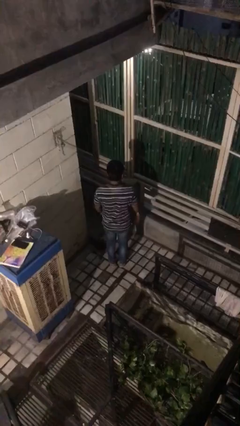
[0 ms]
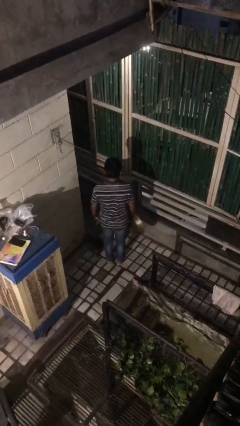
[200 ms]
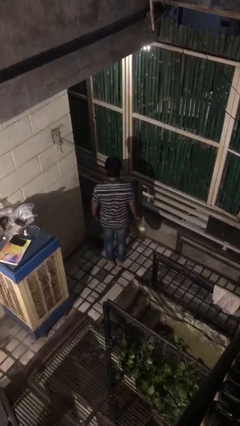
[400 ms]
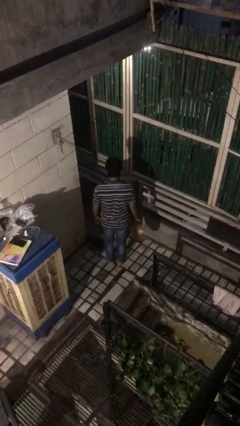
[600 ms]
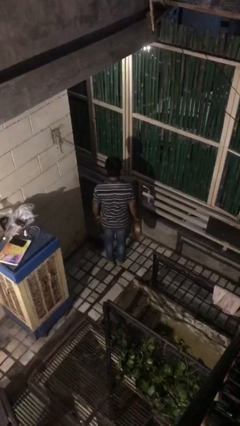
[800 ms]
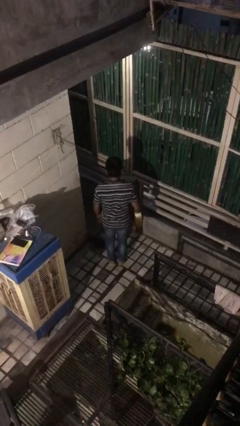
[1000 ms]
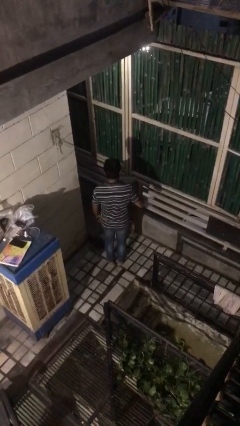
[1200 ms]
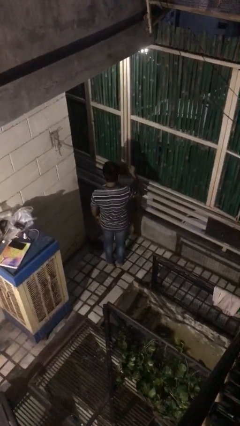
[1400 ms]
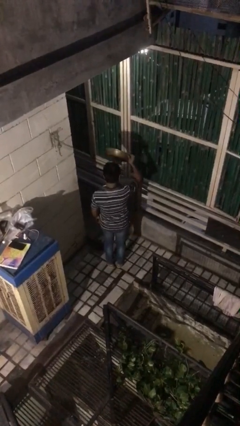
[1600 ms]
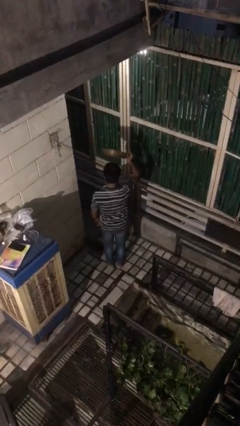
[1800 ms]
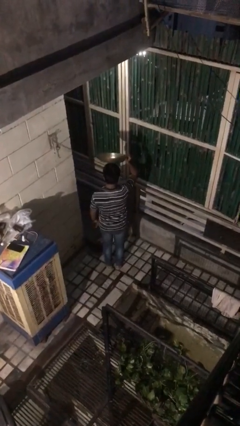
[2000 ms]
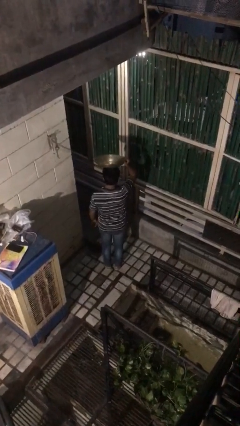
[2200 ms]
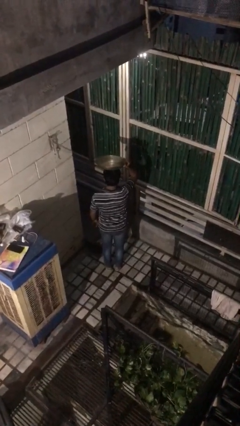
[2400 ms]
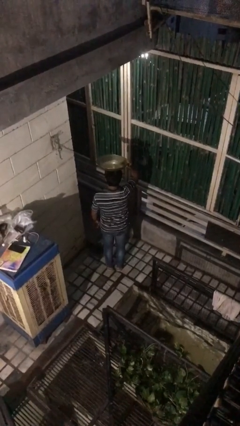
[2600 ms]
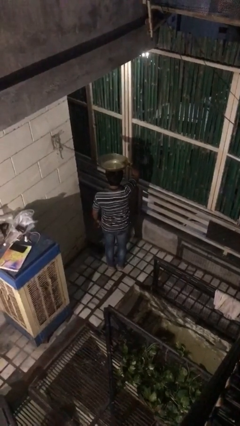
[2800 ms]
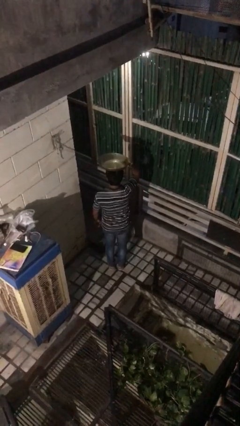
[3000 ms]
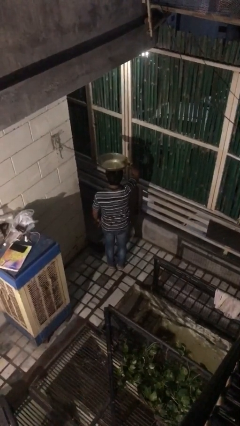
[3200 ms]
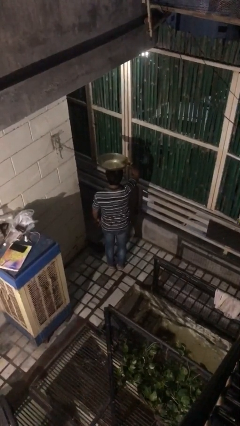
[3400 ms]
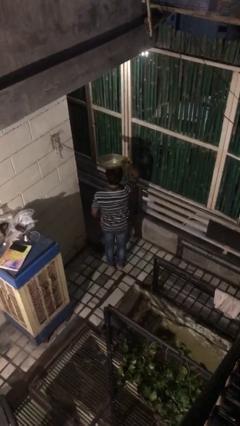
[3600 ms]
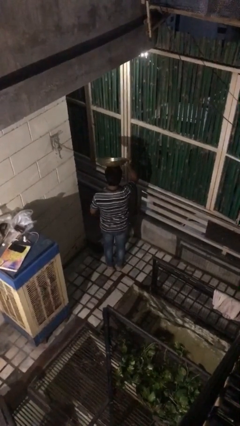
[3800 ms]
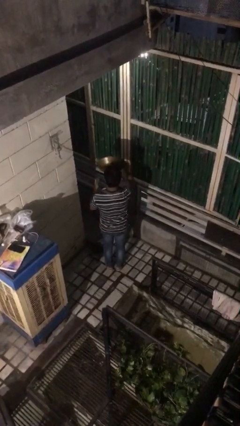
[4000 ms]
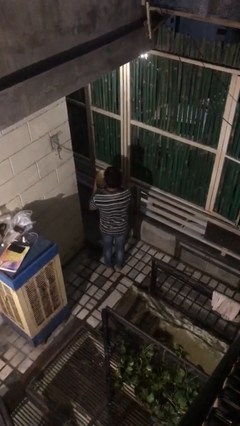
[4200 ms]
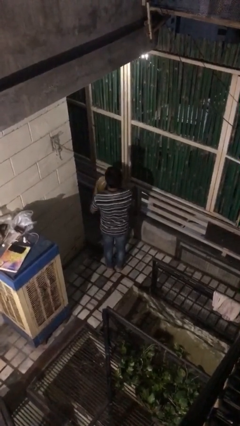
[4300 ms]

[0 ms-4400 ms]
person holds object above head

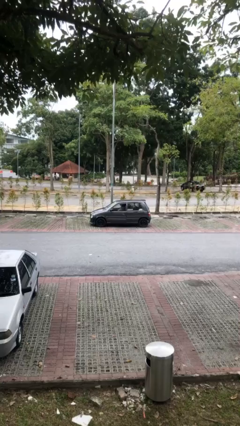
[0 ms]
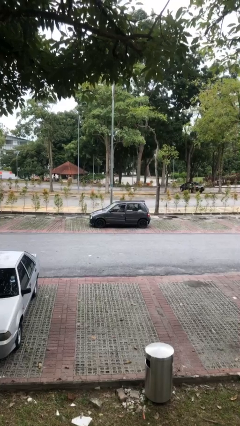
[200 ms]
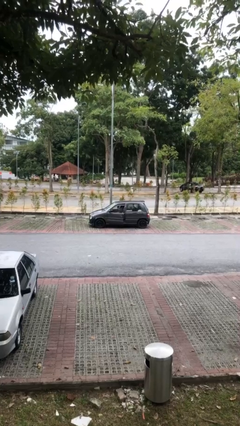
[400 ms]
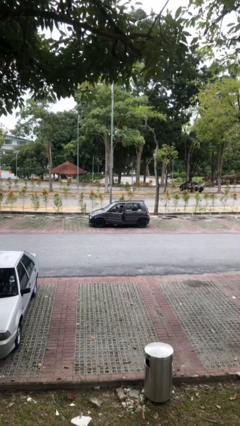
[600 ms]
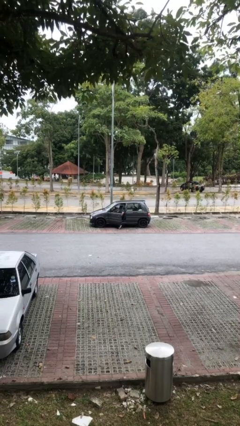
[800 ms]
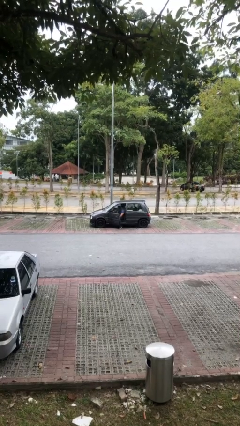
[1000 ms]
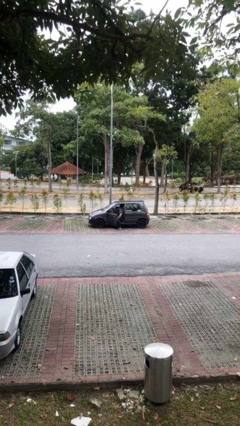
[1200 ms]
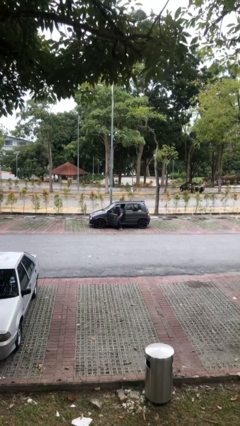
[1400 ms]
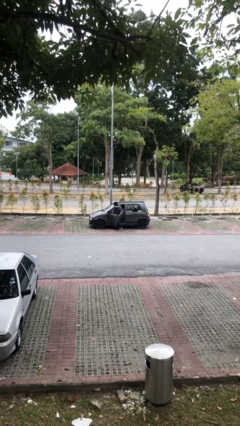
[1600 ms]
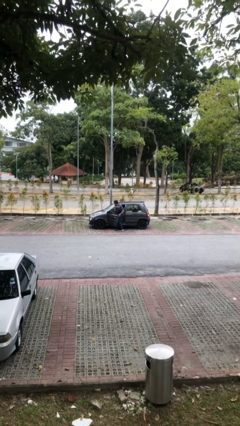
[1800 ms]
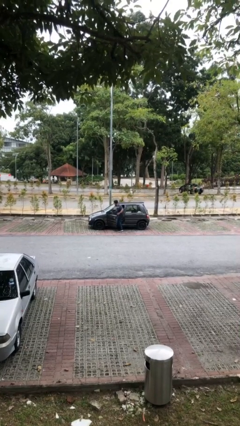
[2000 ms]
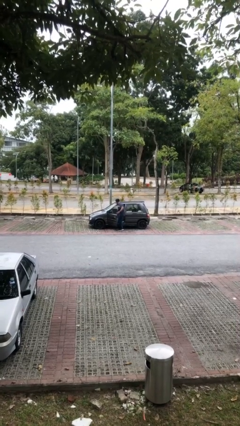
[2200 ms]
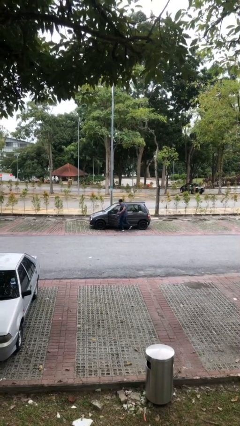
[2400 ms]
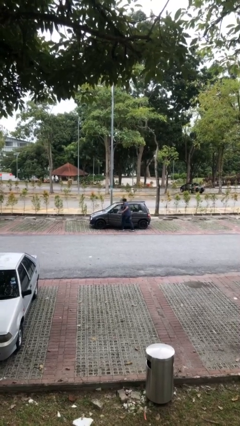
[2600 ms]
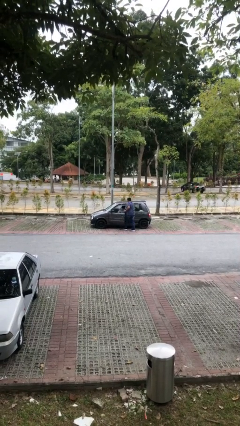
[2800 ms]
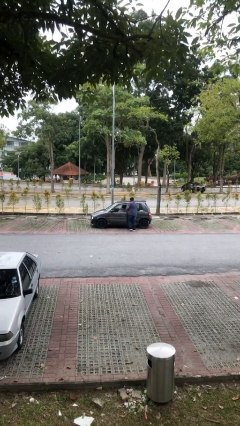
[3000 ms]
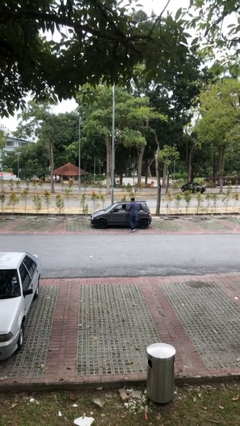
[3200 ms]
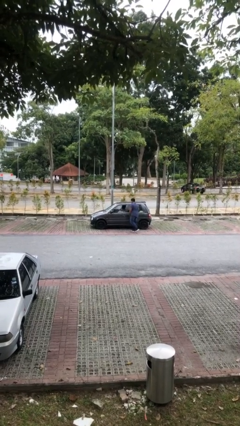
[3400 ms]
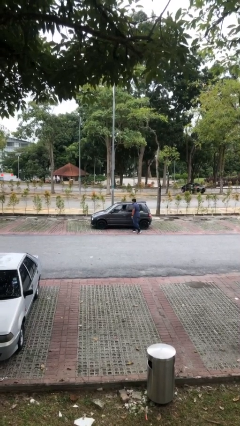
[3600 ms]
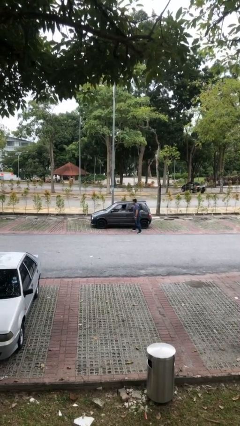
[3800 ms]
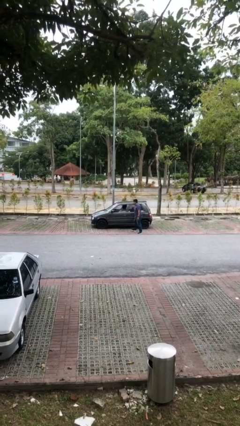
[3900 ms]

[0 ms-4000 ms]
car drops off person

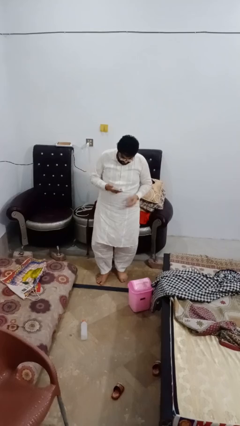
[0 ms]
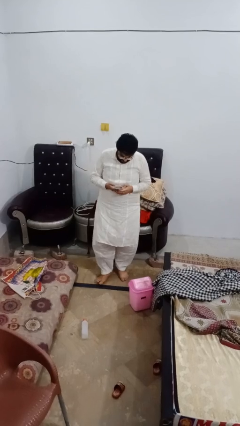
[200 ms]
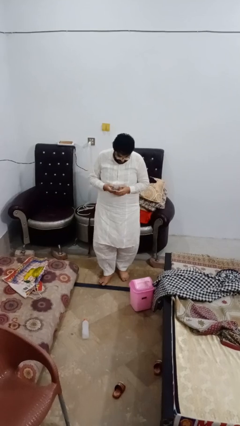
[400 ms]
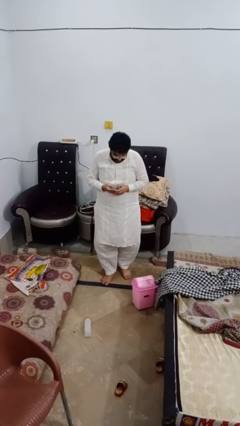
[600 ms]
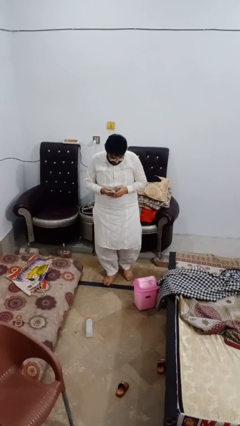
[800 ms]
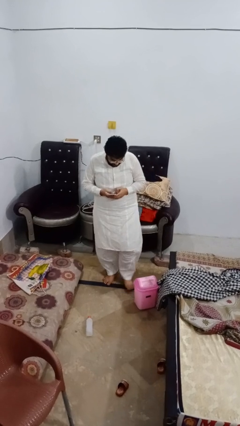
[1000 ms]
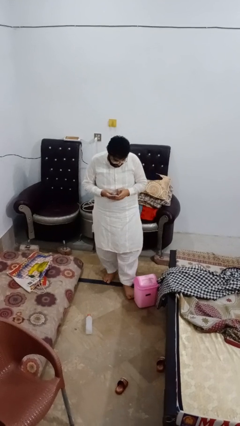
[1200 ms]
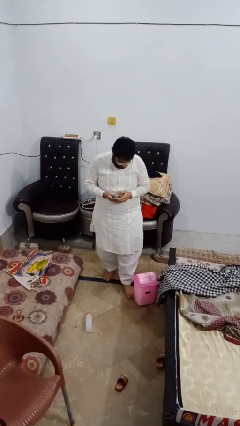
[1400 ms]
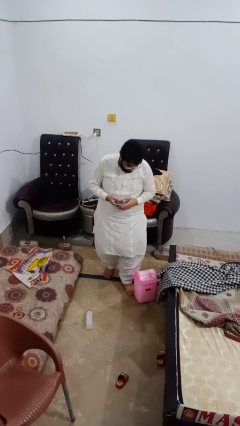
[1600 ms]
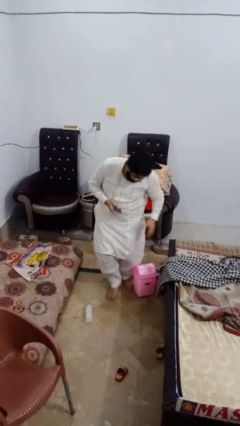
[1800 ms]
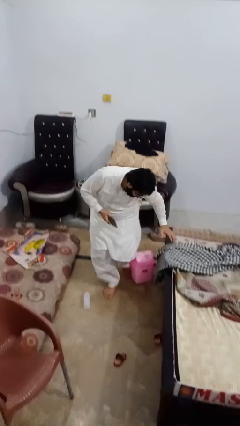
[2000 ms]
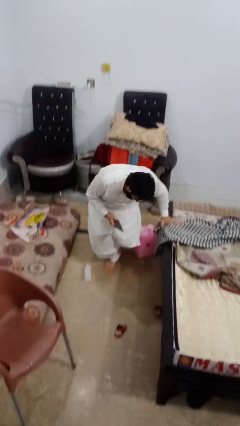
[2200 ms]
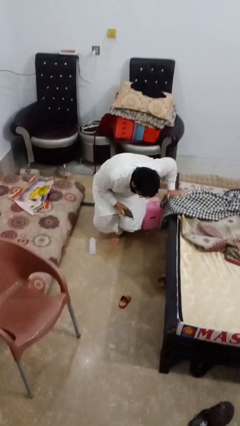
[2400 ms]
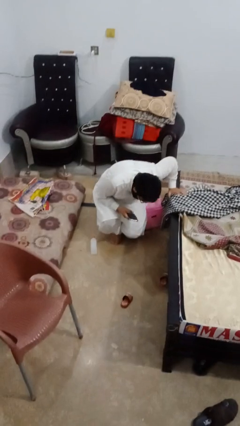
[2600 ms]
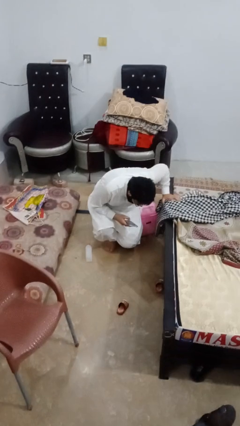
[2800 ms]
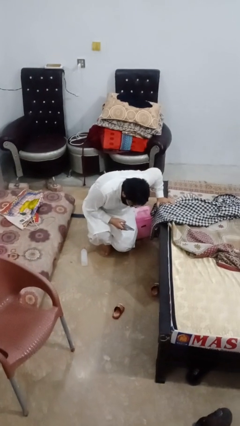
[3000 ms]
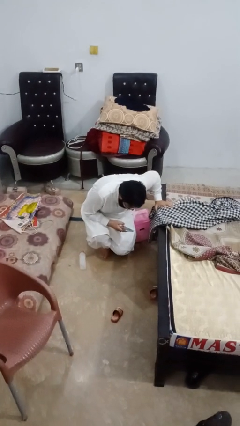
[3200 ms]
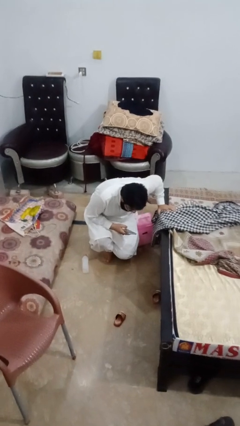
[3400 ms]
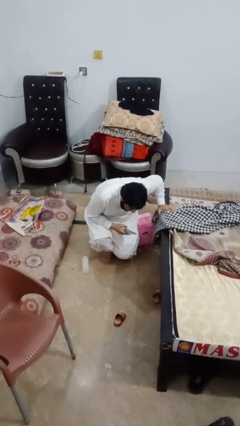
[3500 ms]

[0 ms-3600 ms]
person trips on object on floor

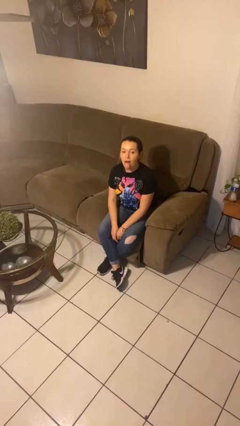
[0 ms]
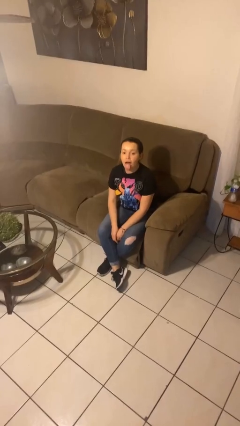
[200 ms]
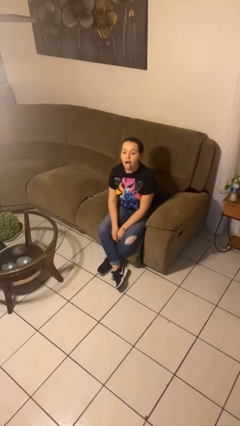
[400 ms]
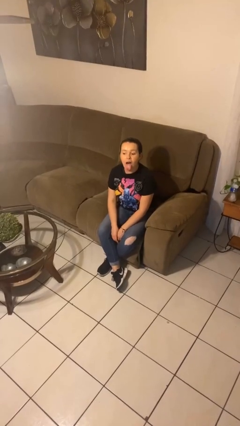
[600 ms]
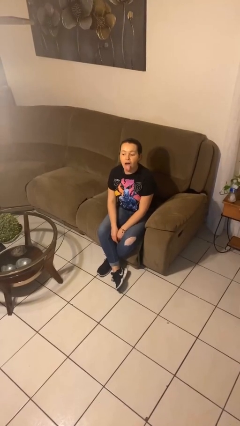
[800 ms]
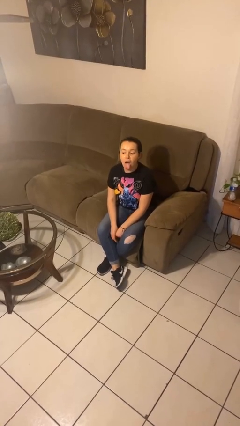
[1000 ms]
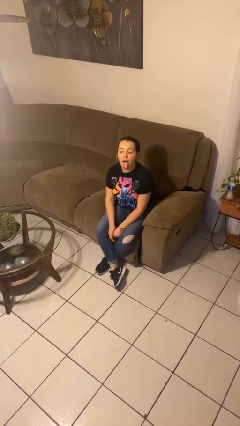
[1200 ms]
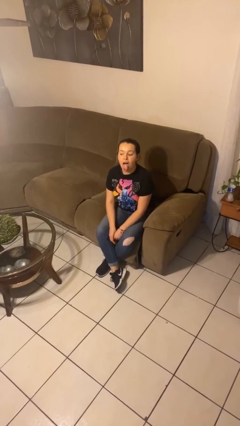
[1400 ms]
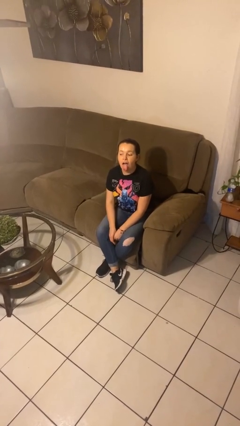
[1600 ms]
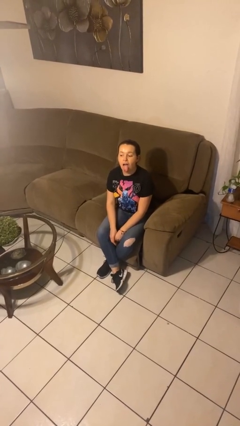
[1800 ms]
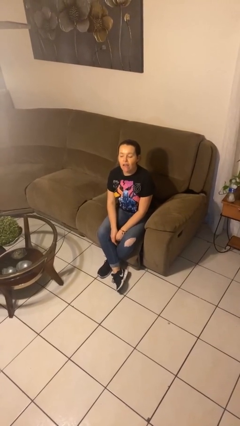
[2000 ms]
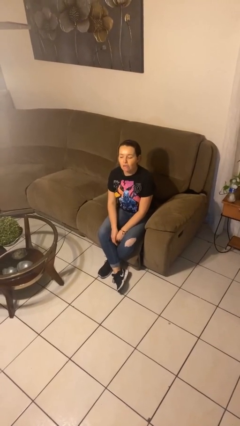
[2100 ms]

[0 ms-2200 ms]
person sticks out tongue

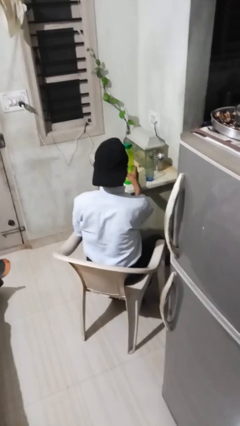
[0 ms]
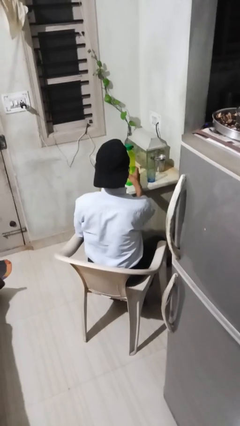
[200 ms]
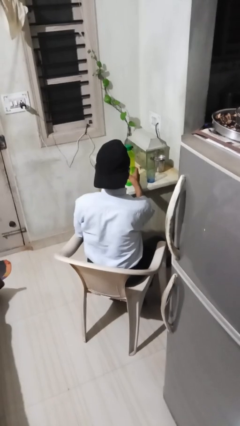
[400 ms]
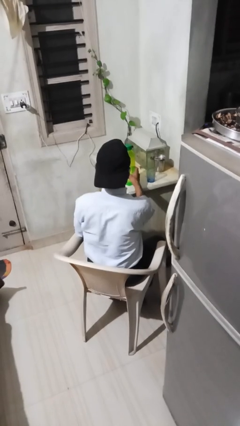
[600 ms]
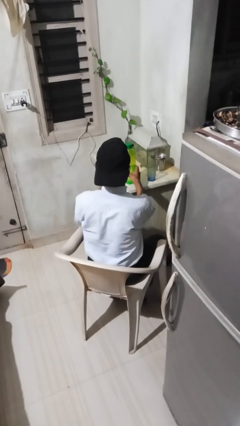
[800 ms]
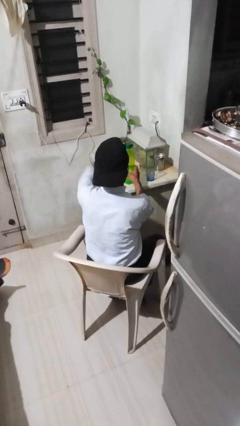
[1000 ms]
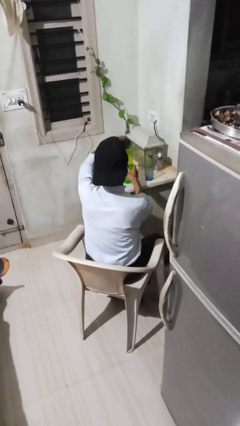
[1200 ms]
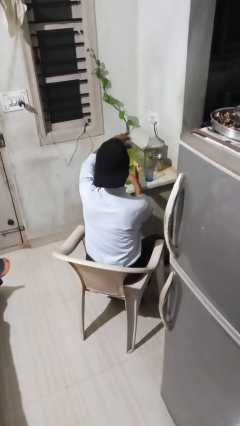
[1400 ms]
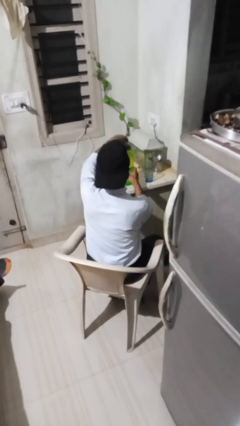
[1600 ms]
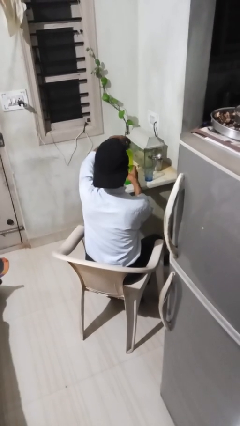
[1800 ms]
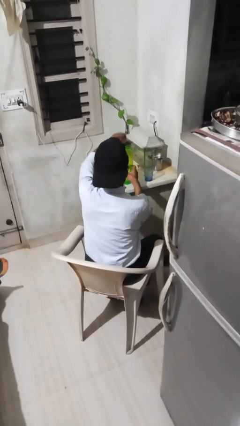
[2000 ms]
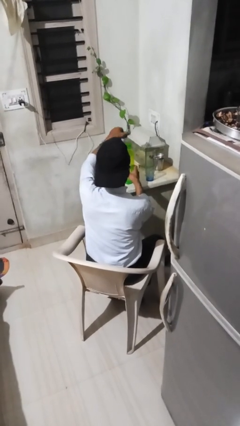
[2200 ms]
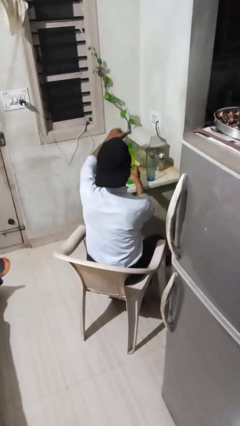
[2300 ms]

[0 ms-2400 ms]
person unscrews lid from bottle

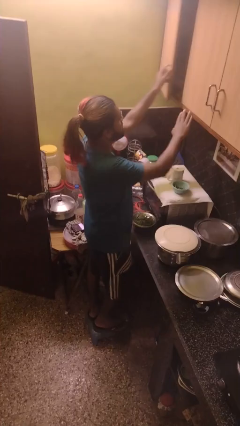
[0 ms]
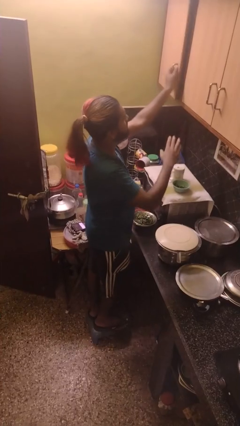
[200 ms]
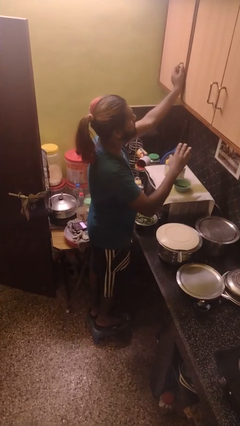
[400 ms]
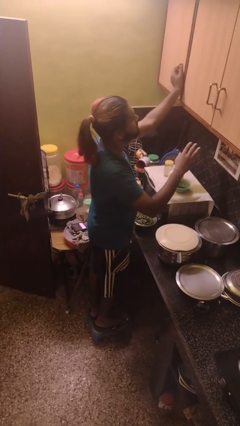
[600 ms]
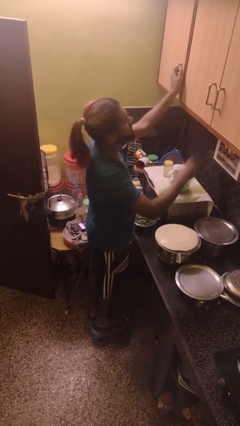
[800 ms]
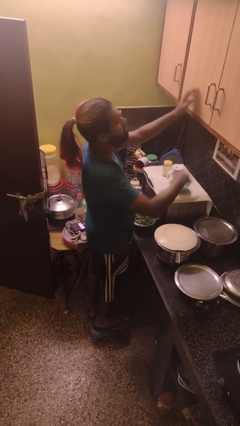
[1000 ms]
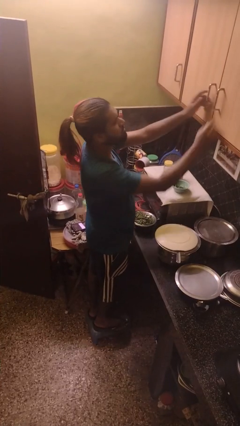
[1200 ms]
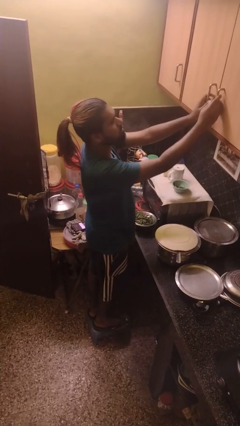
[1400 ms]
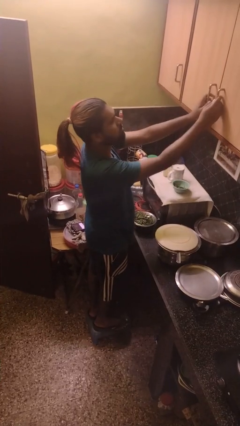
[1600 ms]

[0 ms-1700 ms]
person closes cabinet
